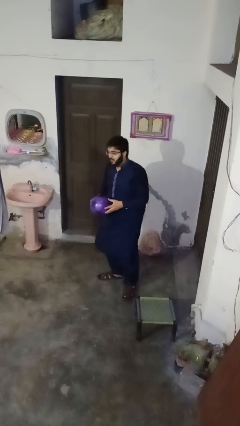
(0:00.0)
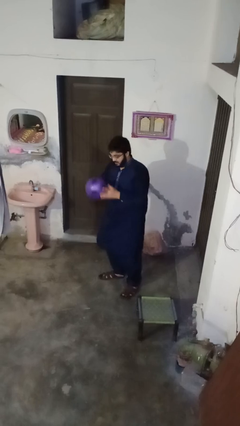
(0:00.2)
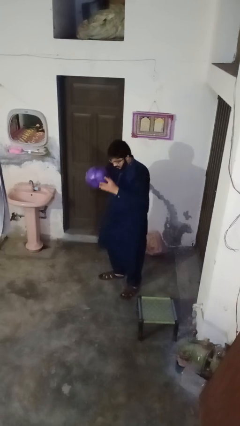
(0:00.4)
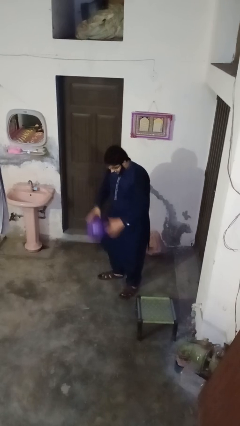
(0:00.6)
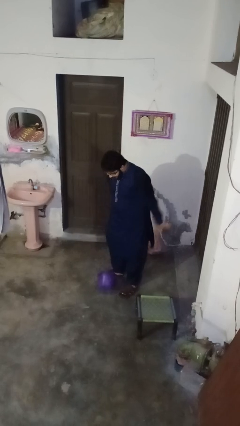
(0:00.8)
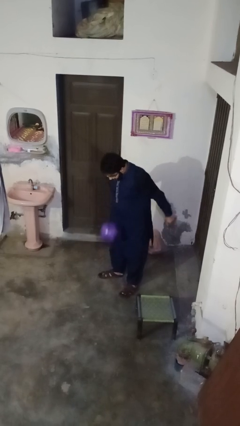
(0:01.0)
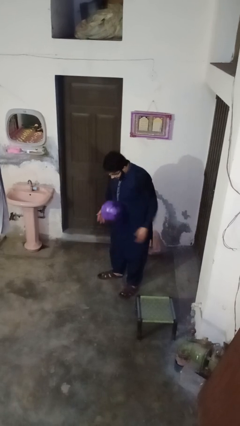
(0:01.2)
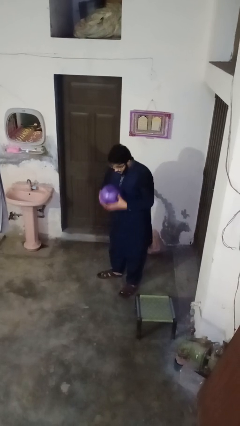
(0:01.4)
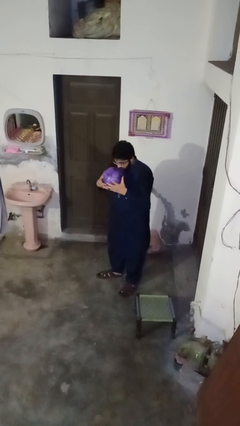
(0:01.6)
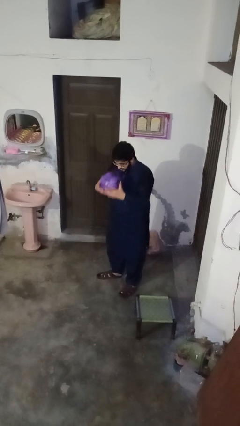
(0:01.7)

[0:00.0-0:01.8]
person bounces ball on floor

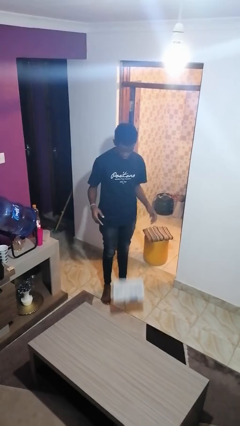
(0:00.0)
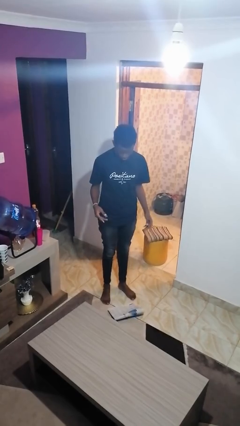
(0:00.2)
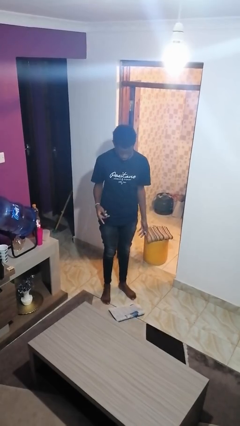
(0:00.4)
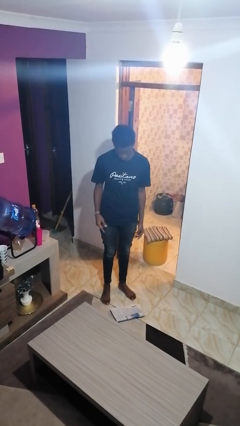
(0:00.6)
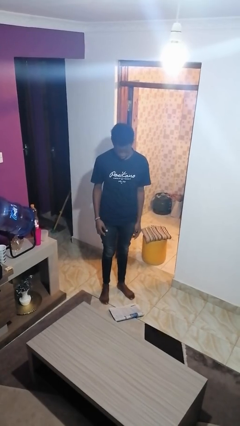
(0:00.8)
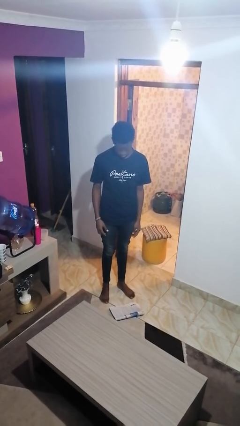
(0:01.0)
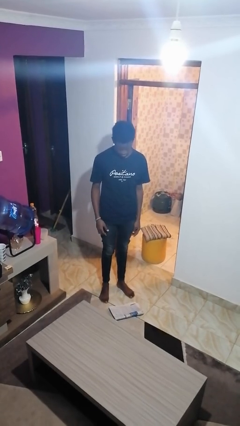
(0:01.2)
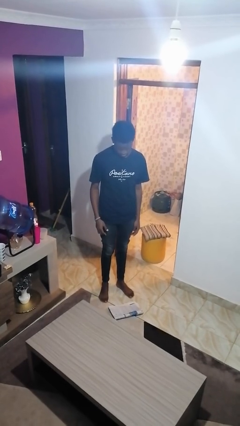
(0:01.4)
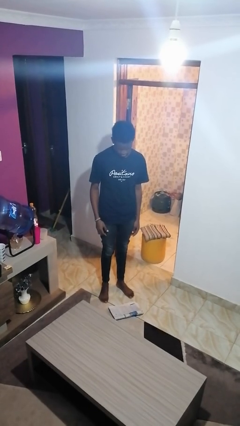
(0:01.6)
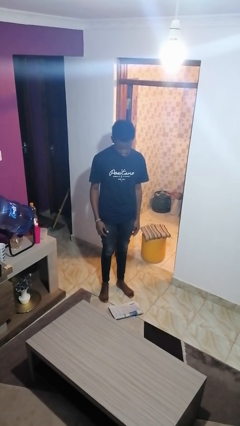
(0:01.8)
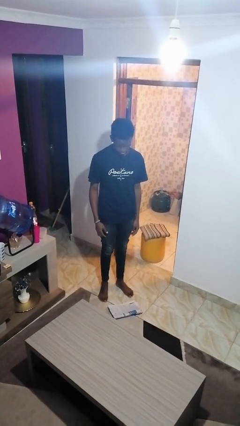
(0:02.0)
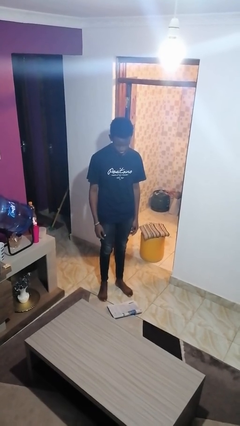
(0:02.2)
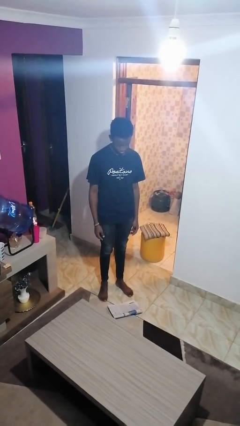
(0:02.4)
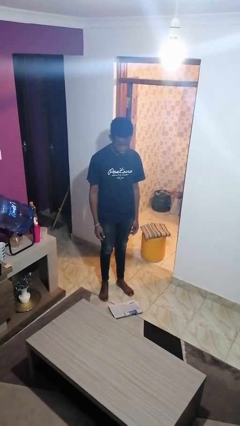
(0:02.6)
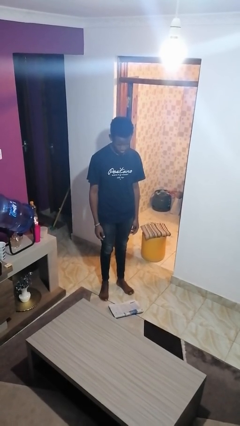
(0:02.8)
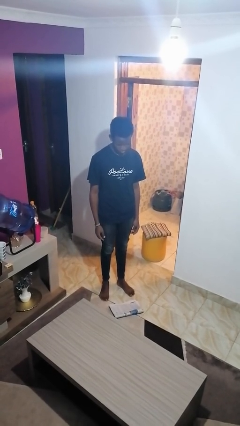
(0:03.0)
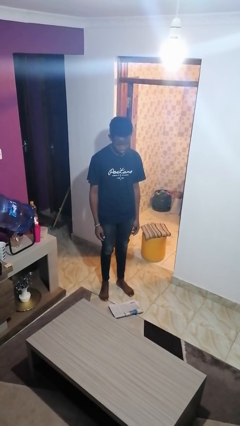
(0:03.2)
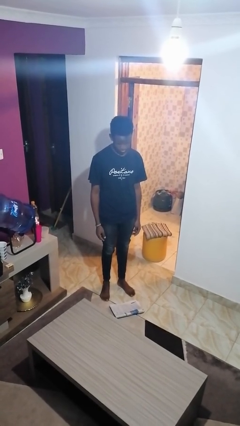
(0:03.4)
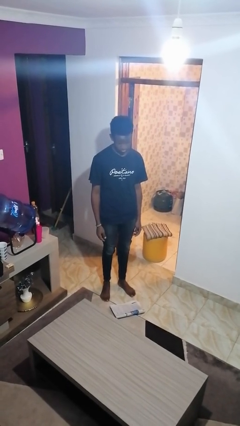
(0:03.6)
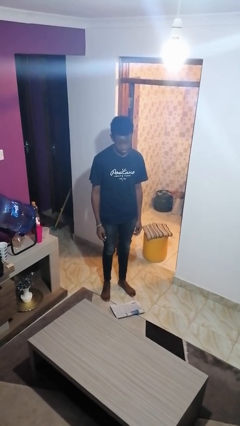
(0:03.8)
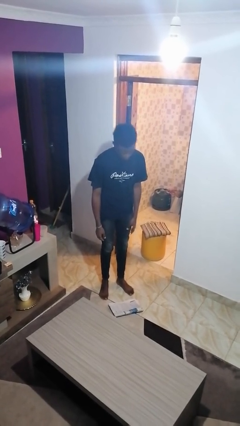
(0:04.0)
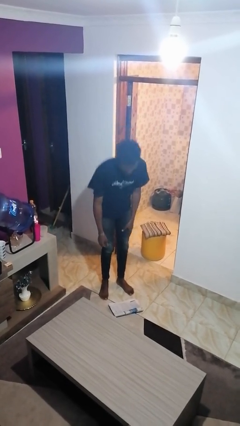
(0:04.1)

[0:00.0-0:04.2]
person drops object

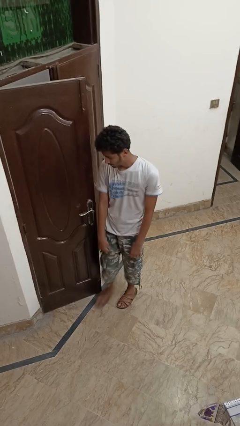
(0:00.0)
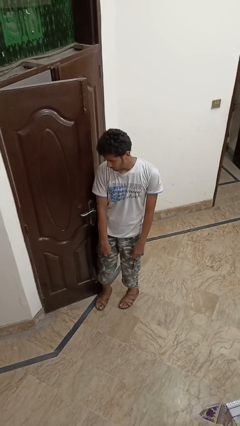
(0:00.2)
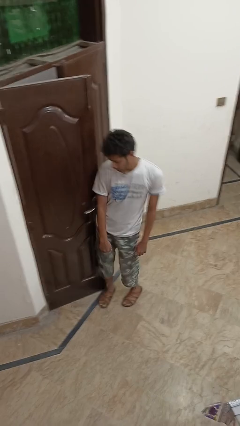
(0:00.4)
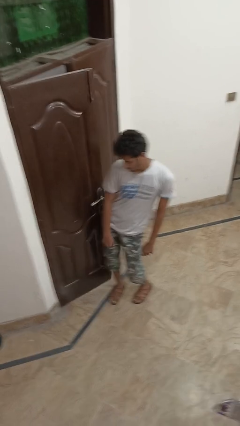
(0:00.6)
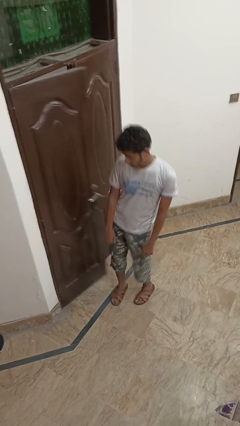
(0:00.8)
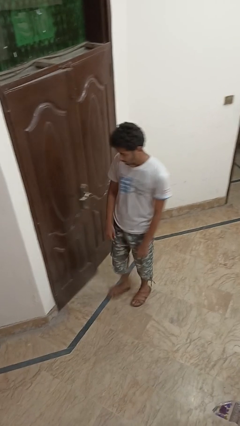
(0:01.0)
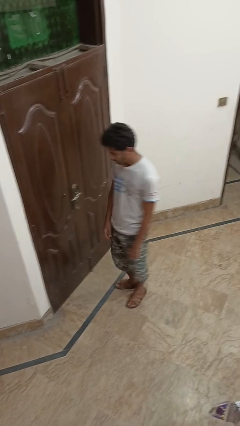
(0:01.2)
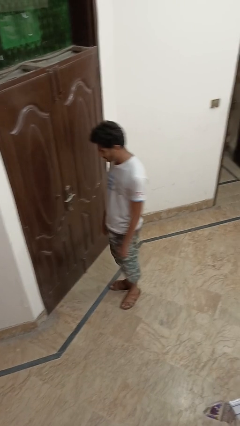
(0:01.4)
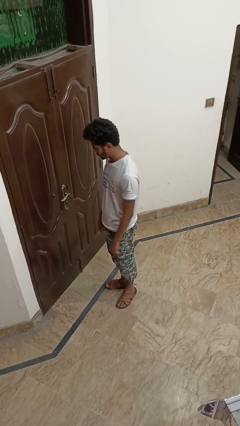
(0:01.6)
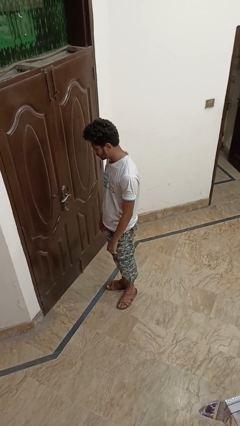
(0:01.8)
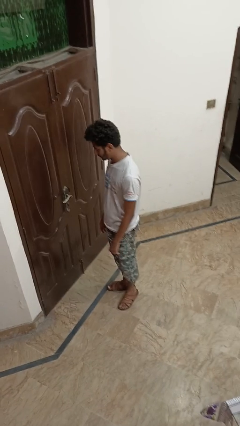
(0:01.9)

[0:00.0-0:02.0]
person closes door with hip

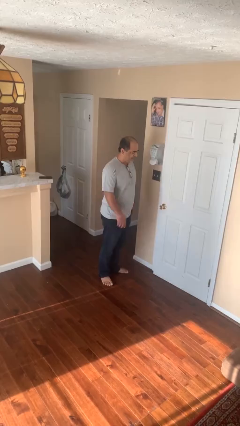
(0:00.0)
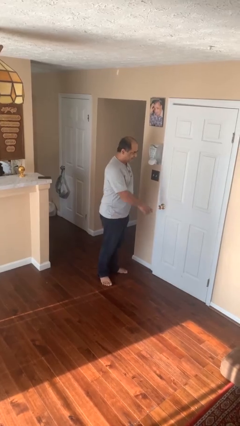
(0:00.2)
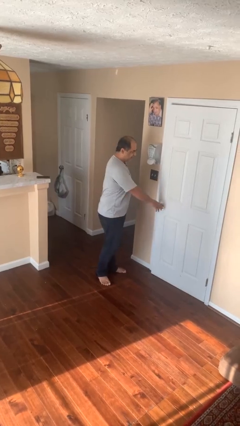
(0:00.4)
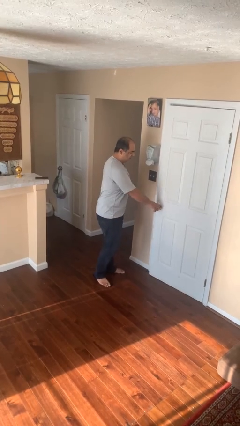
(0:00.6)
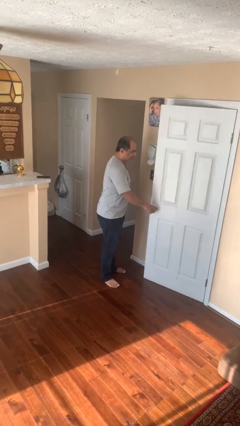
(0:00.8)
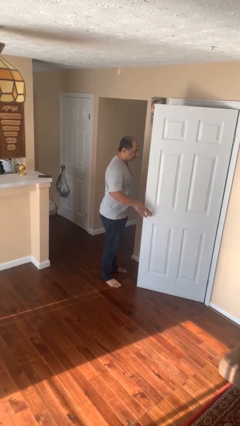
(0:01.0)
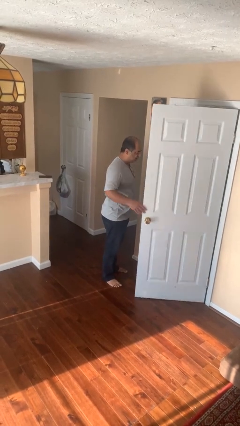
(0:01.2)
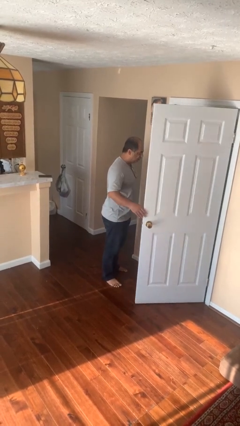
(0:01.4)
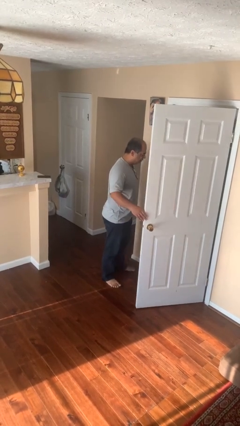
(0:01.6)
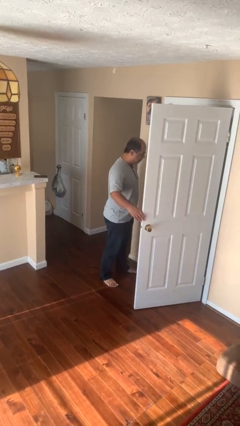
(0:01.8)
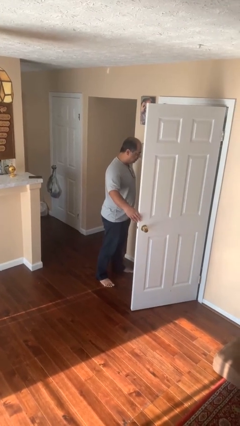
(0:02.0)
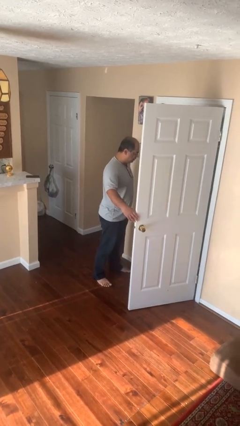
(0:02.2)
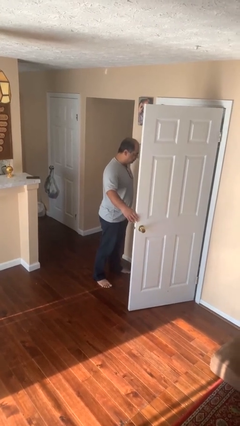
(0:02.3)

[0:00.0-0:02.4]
person opens facility door

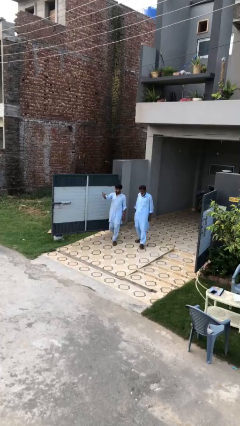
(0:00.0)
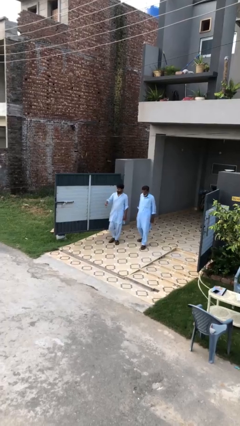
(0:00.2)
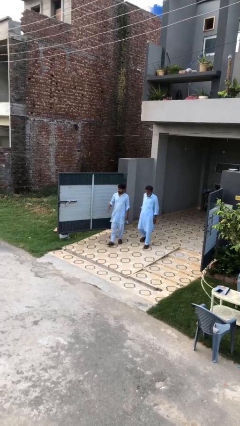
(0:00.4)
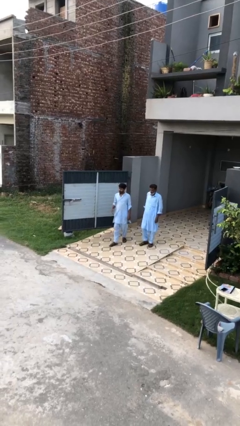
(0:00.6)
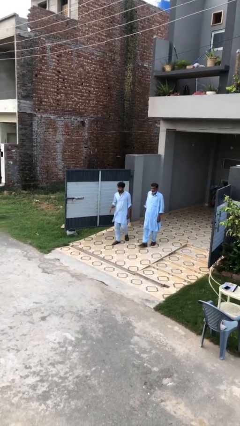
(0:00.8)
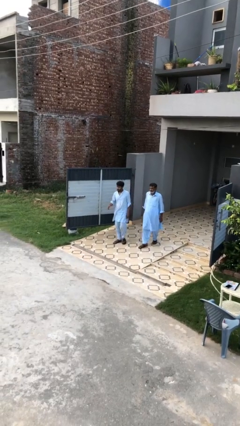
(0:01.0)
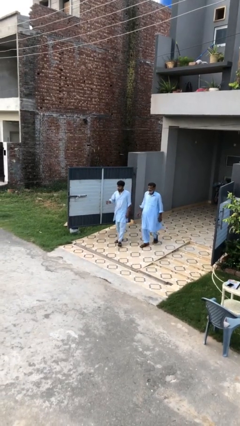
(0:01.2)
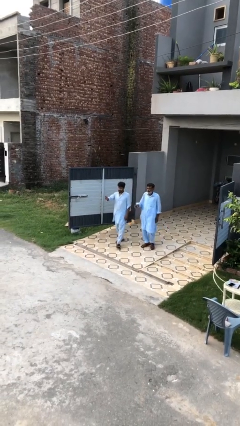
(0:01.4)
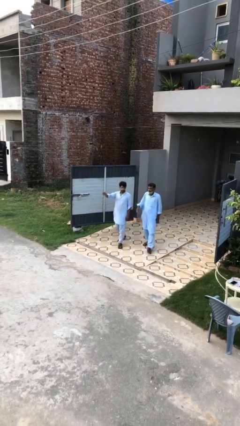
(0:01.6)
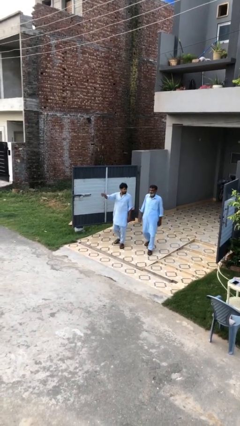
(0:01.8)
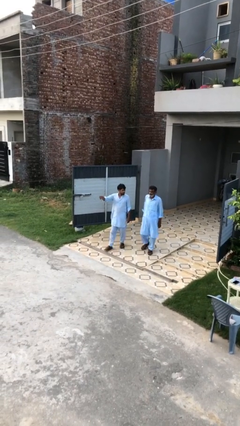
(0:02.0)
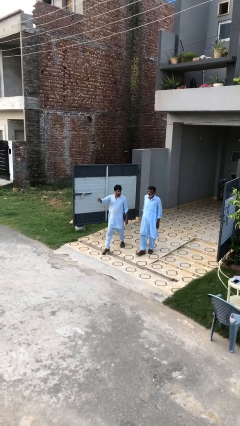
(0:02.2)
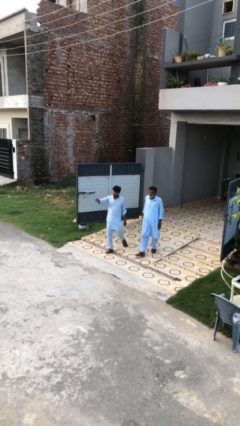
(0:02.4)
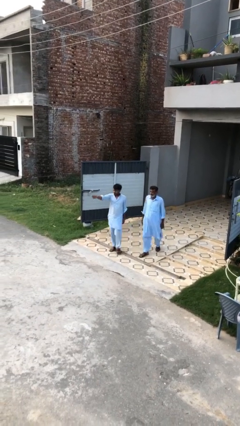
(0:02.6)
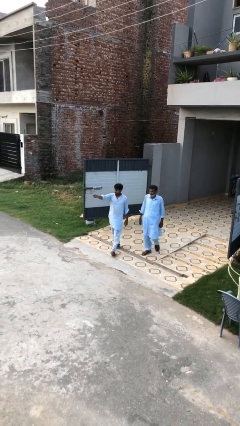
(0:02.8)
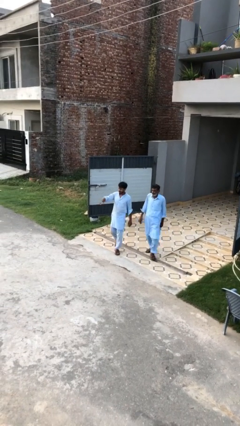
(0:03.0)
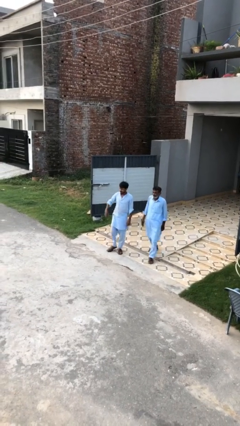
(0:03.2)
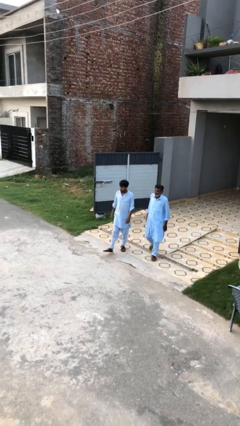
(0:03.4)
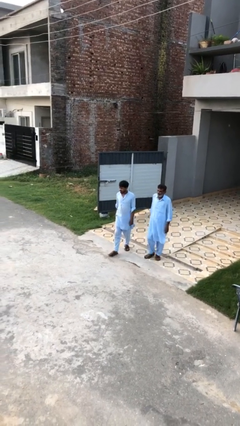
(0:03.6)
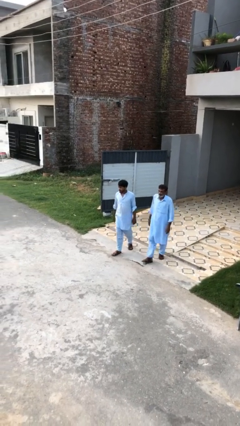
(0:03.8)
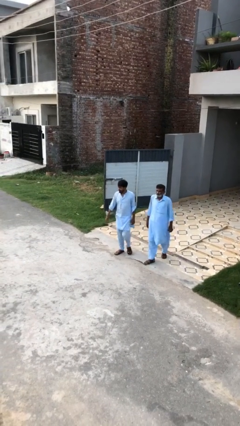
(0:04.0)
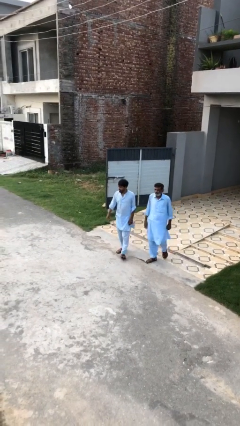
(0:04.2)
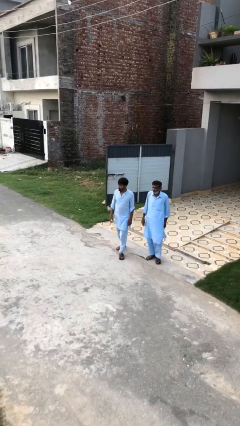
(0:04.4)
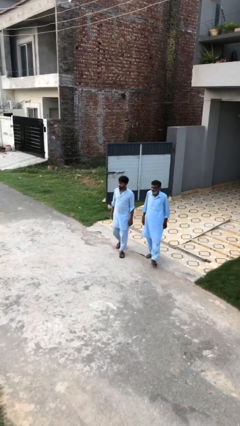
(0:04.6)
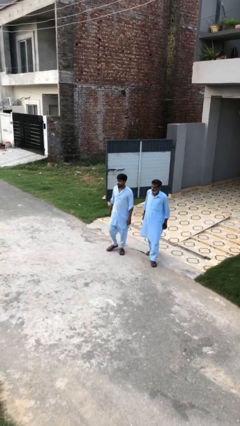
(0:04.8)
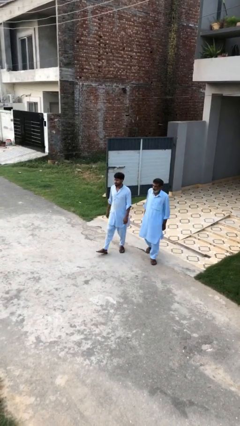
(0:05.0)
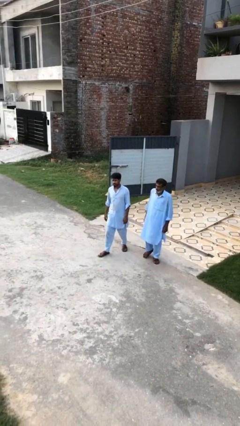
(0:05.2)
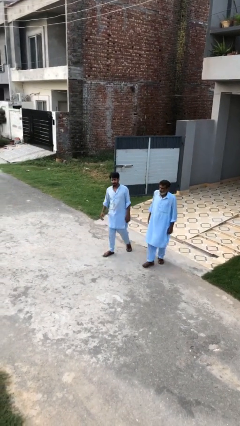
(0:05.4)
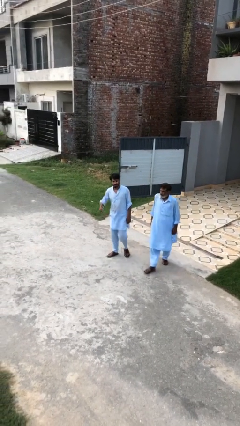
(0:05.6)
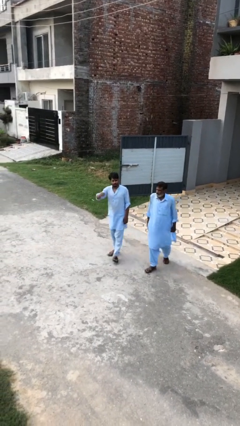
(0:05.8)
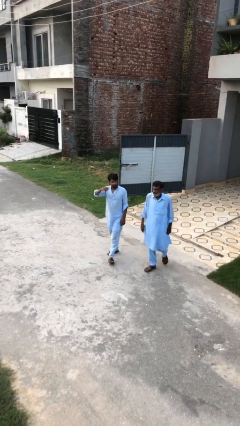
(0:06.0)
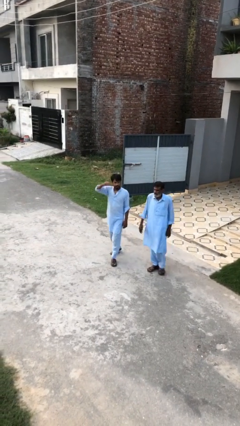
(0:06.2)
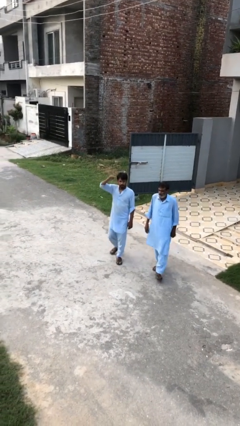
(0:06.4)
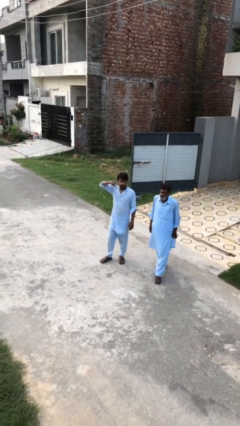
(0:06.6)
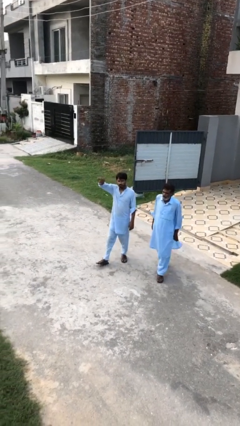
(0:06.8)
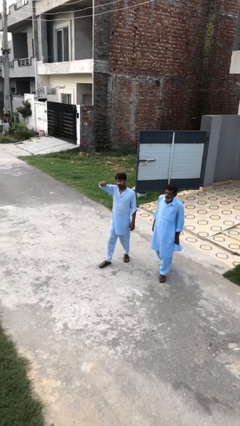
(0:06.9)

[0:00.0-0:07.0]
person talks to person
